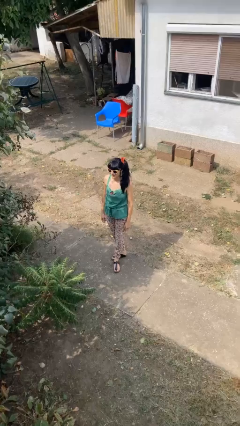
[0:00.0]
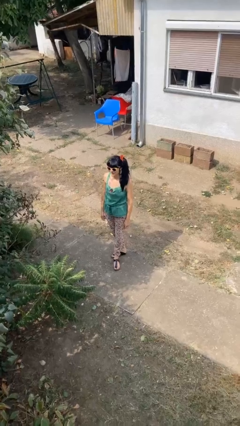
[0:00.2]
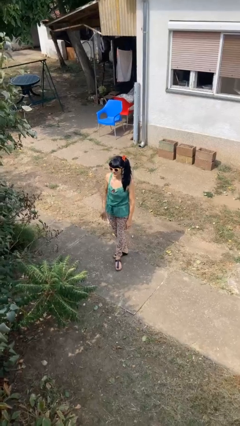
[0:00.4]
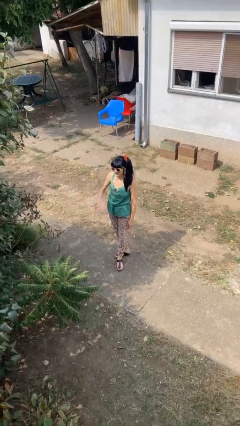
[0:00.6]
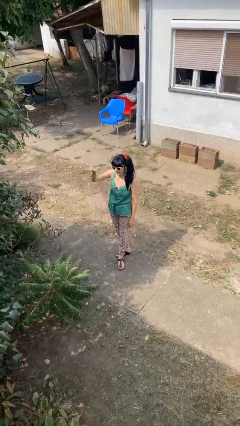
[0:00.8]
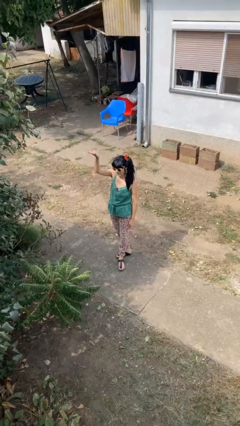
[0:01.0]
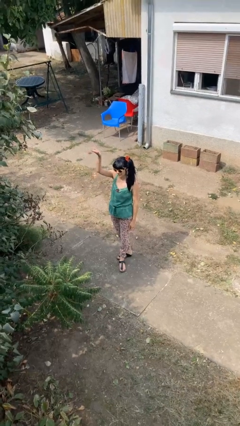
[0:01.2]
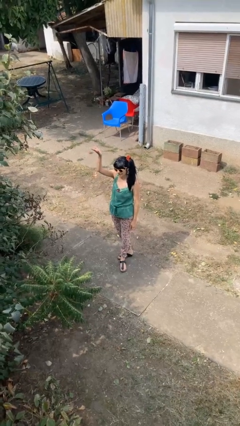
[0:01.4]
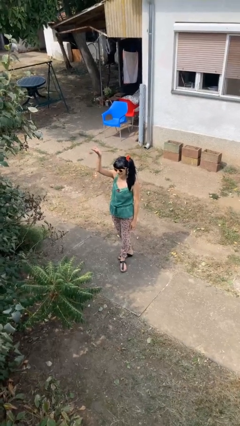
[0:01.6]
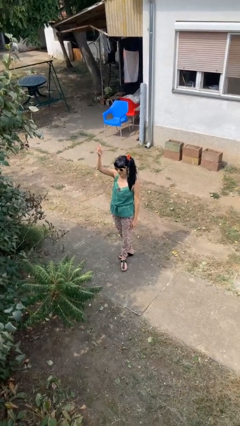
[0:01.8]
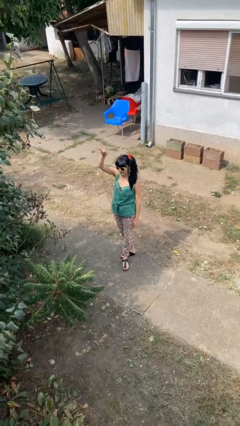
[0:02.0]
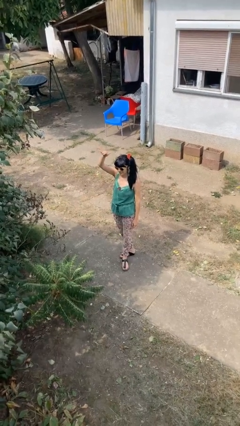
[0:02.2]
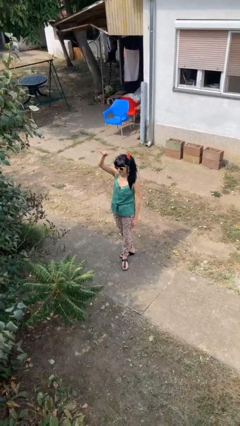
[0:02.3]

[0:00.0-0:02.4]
person gestures swipe up

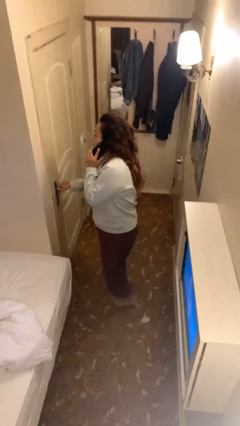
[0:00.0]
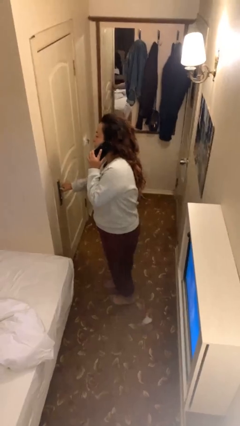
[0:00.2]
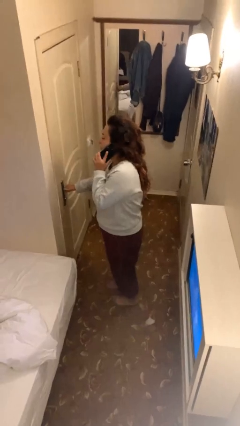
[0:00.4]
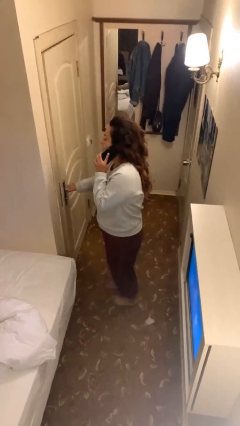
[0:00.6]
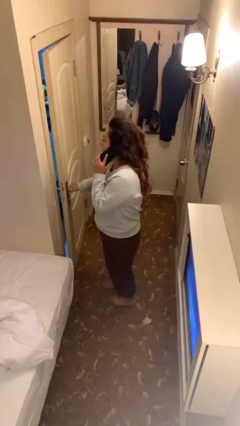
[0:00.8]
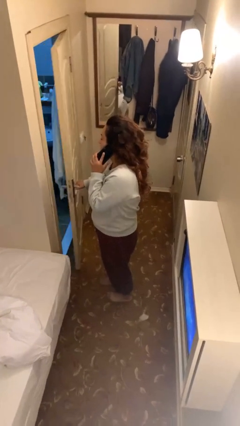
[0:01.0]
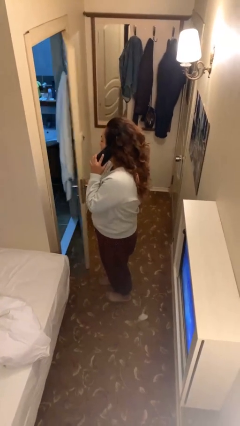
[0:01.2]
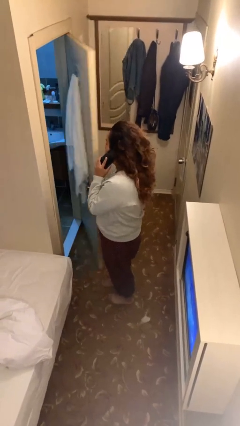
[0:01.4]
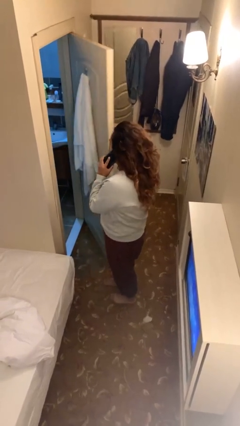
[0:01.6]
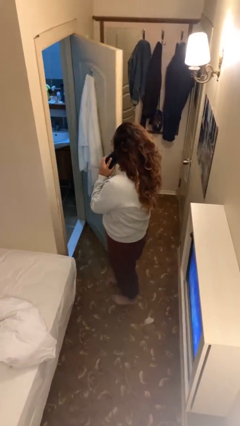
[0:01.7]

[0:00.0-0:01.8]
person opens facility door

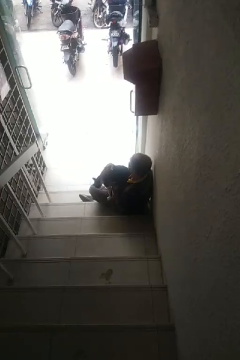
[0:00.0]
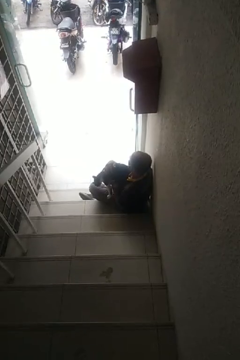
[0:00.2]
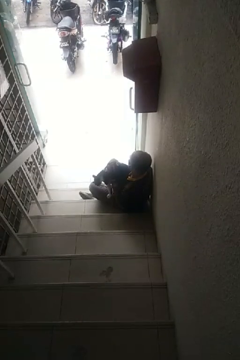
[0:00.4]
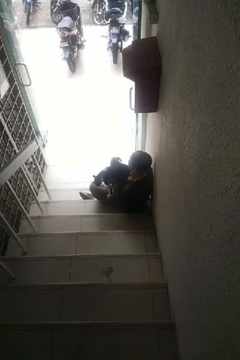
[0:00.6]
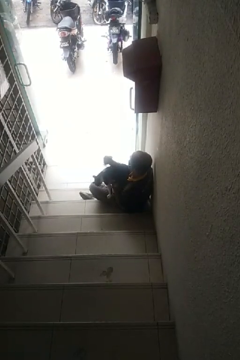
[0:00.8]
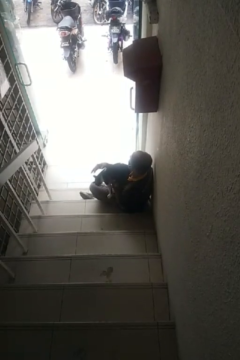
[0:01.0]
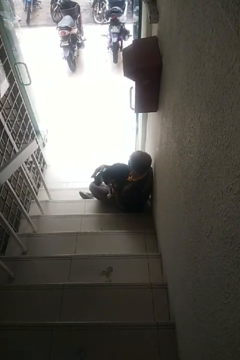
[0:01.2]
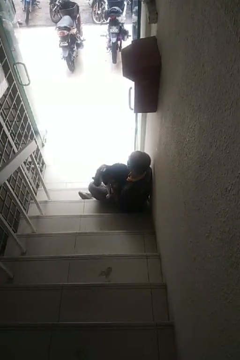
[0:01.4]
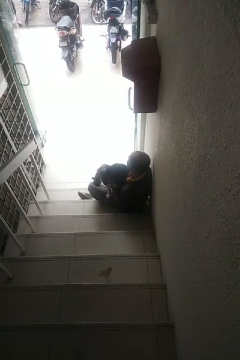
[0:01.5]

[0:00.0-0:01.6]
person pets cat

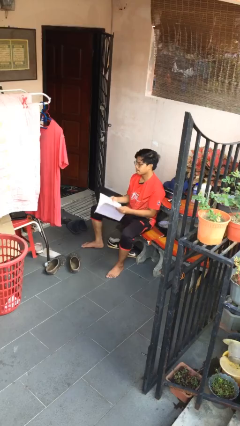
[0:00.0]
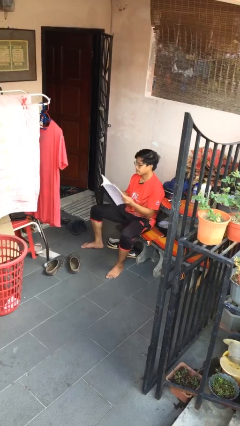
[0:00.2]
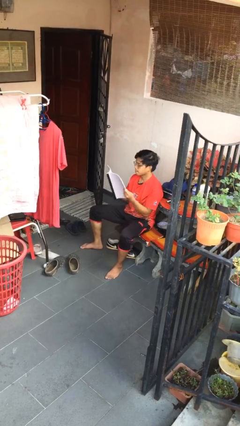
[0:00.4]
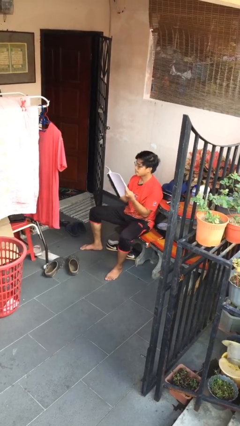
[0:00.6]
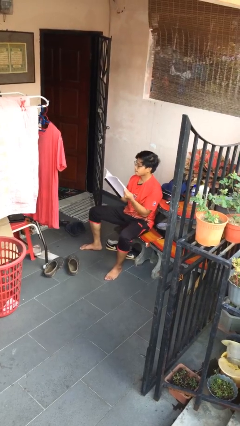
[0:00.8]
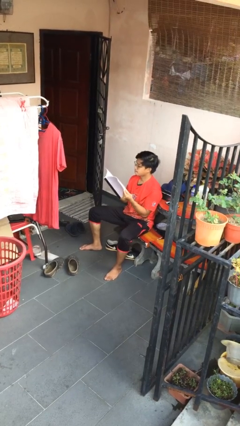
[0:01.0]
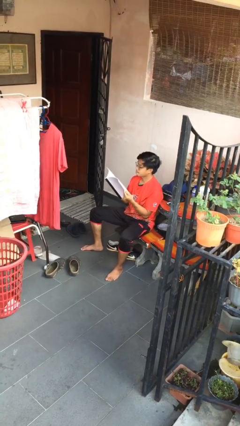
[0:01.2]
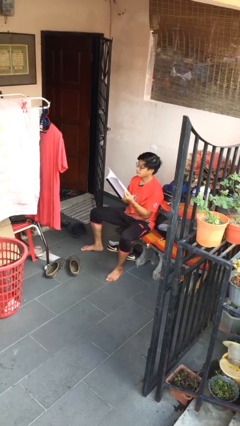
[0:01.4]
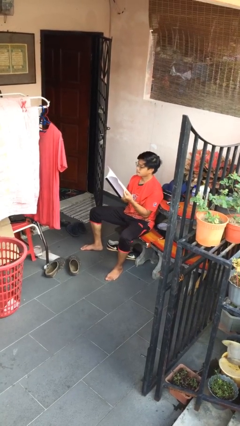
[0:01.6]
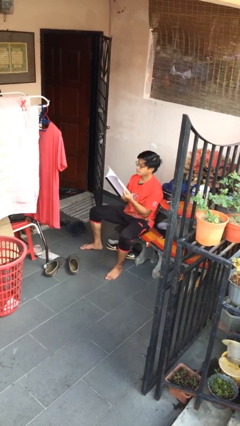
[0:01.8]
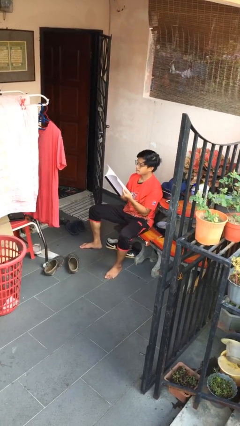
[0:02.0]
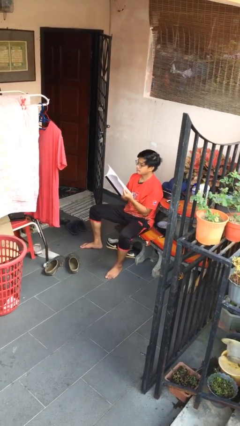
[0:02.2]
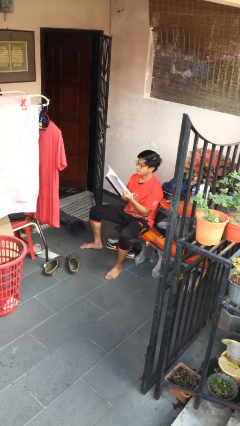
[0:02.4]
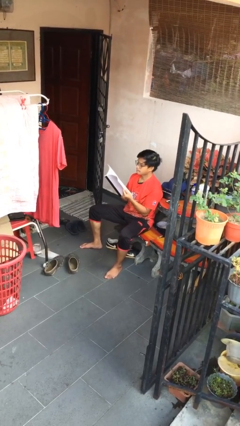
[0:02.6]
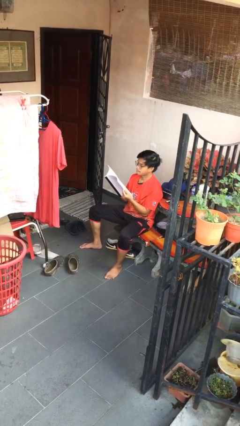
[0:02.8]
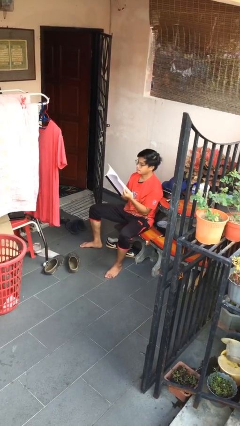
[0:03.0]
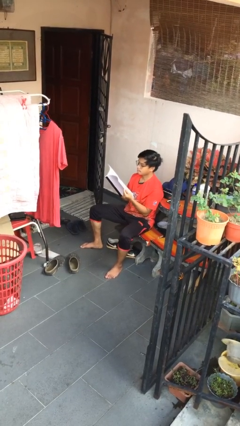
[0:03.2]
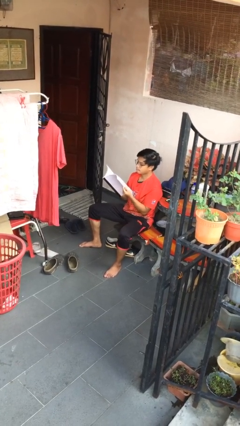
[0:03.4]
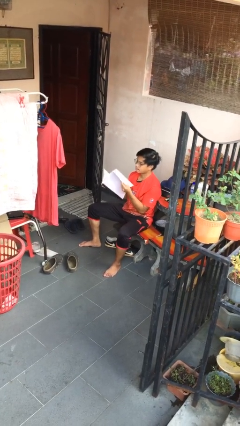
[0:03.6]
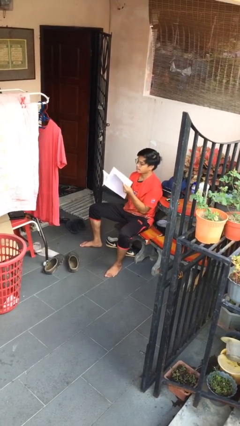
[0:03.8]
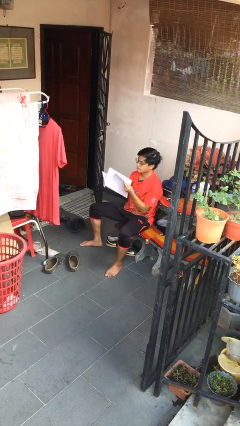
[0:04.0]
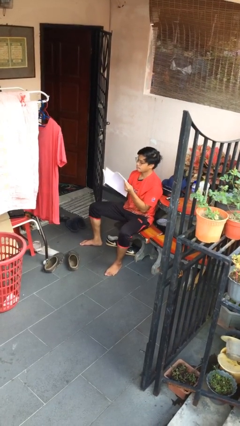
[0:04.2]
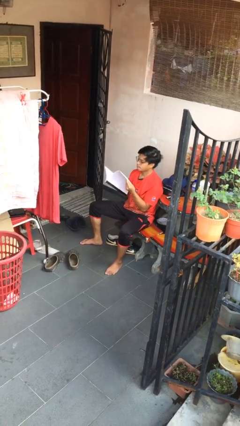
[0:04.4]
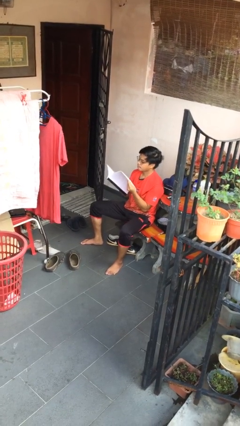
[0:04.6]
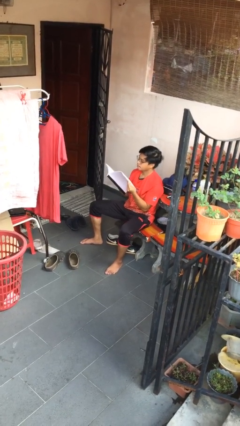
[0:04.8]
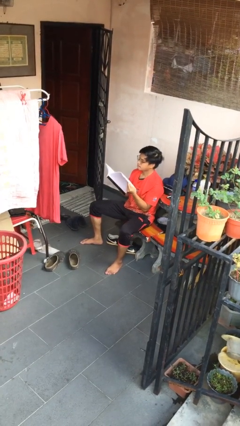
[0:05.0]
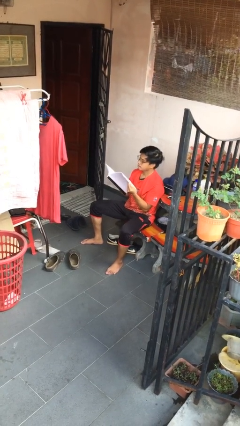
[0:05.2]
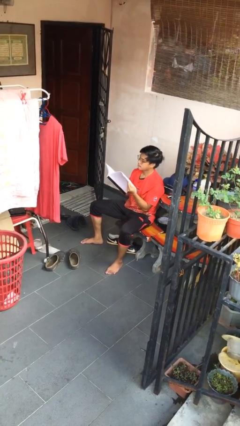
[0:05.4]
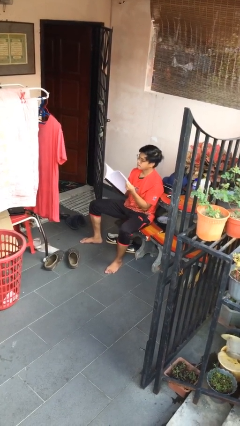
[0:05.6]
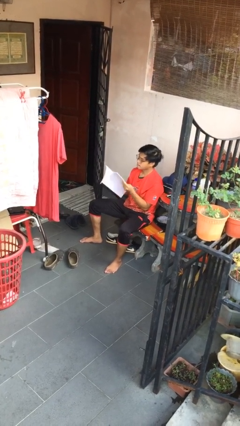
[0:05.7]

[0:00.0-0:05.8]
person reads document

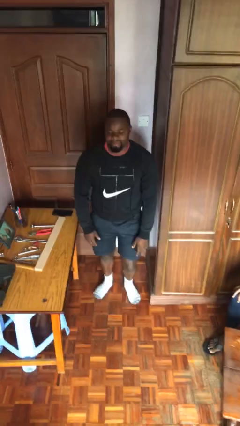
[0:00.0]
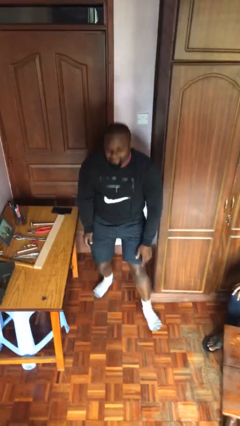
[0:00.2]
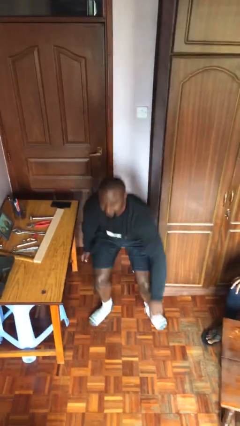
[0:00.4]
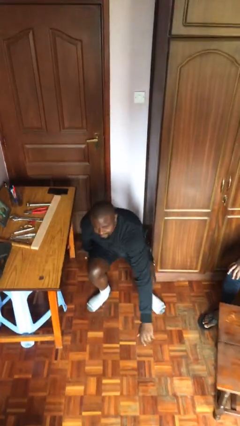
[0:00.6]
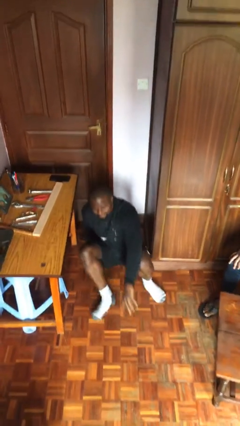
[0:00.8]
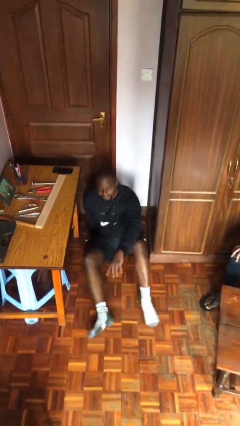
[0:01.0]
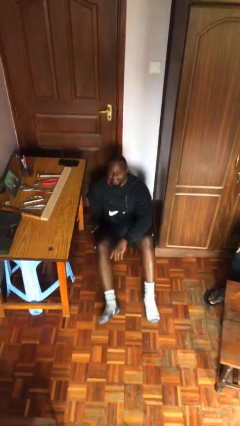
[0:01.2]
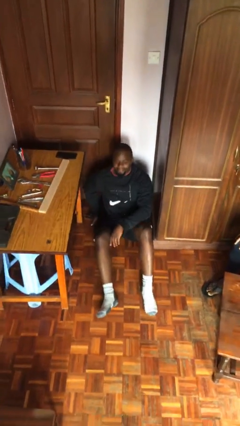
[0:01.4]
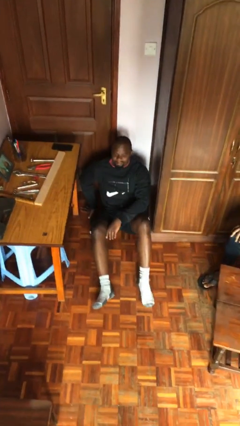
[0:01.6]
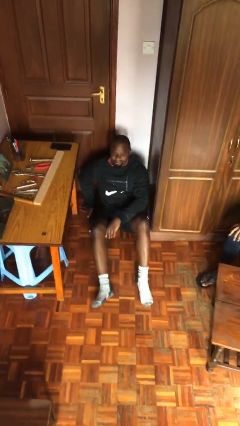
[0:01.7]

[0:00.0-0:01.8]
person sits down

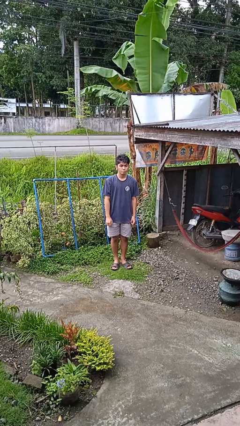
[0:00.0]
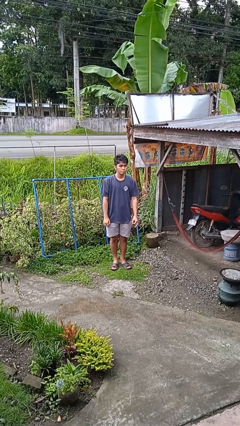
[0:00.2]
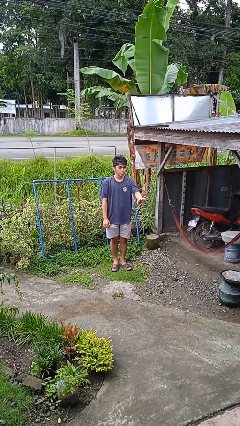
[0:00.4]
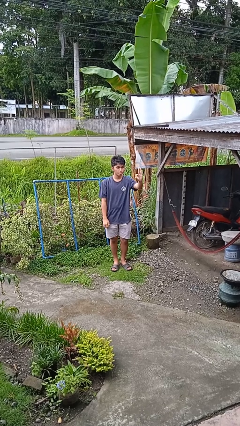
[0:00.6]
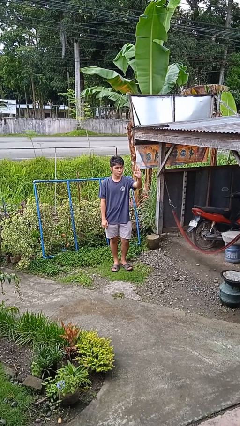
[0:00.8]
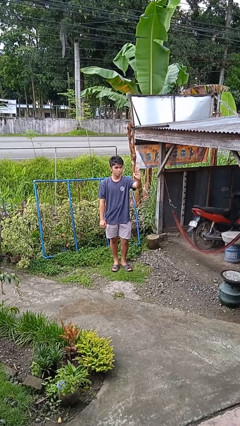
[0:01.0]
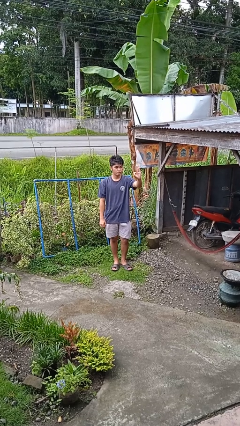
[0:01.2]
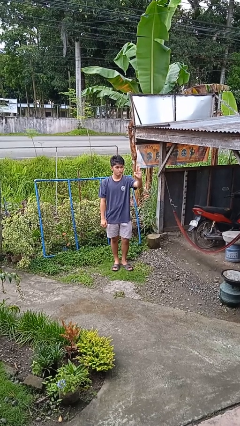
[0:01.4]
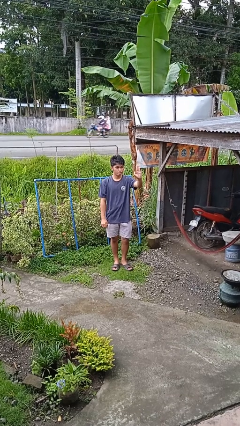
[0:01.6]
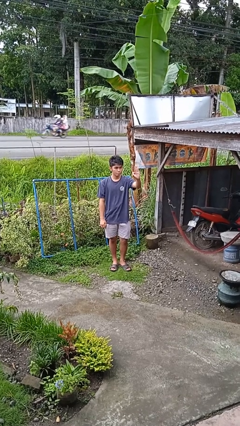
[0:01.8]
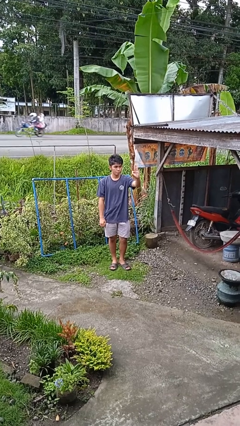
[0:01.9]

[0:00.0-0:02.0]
person gestures number three

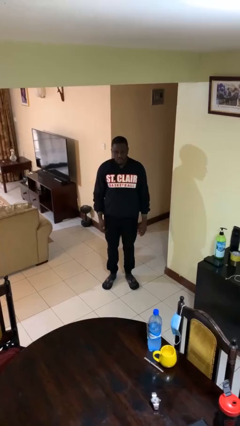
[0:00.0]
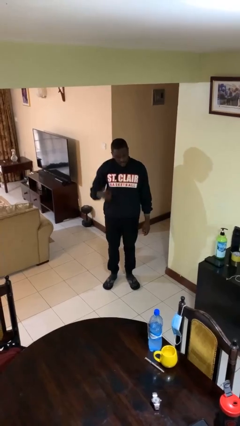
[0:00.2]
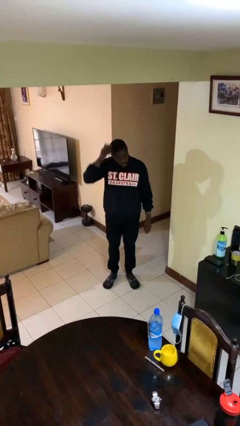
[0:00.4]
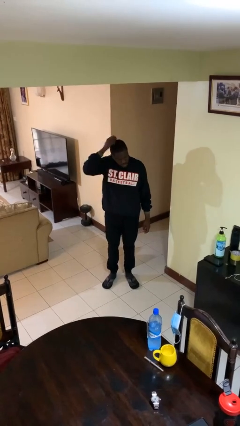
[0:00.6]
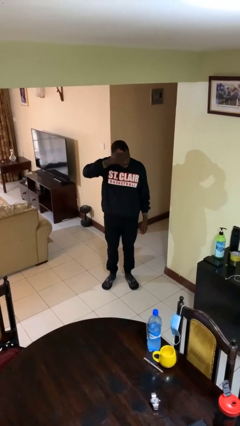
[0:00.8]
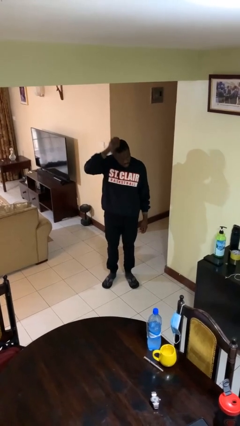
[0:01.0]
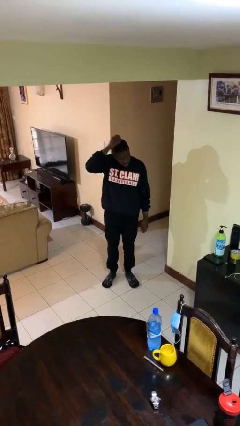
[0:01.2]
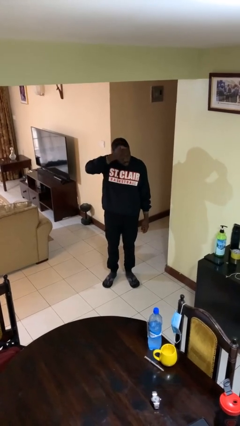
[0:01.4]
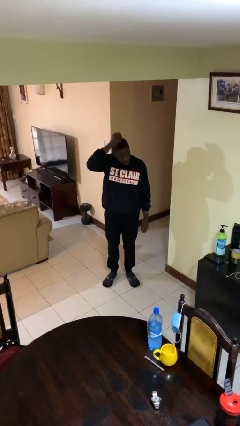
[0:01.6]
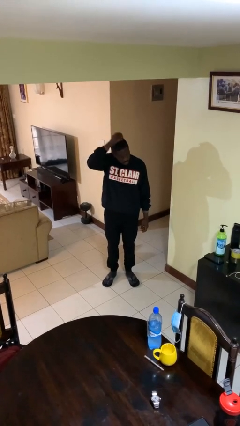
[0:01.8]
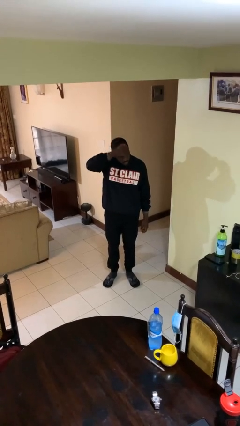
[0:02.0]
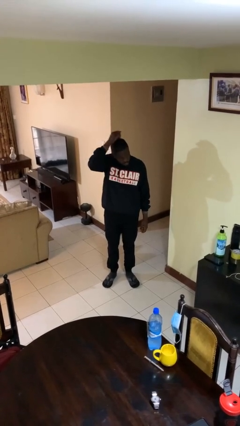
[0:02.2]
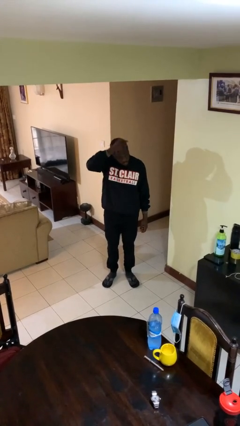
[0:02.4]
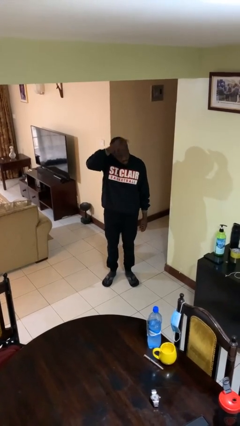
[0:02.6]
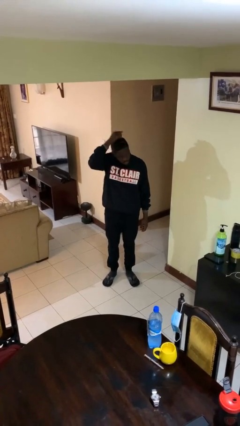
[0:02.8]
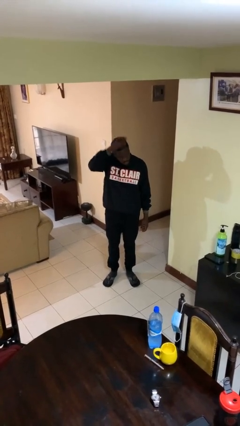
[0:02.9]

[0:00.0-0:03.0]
person brushes hair
